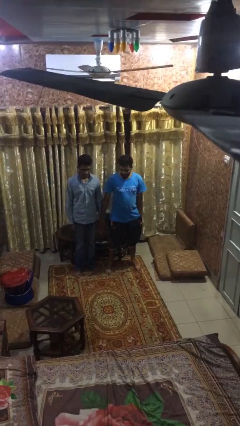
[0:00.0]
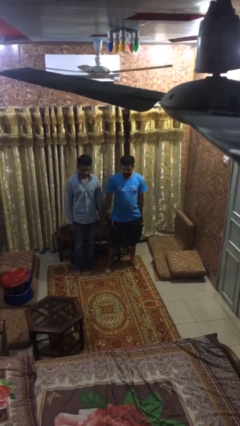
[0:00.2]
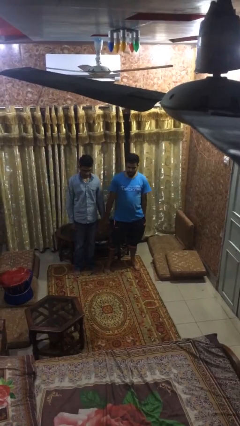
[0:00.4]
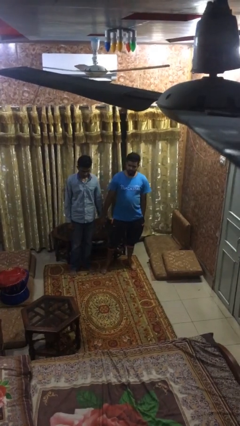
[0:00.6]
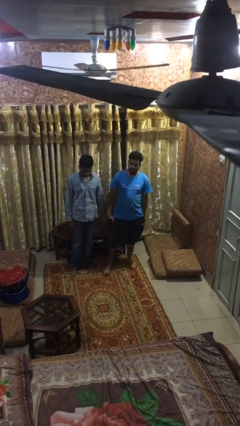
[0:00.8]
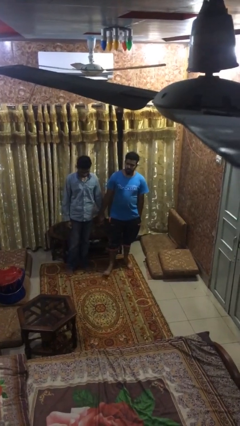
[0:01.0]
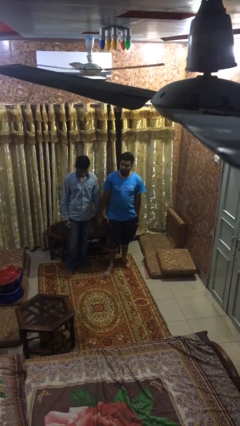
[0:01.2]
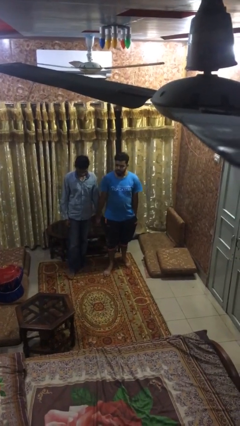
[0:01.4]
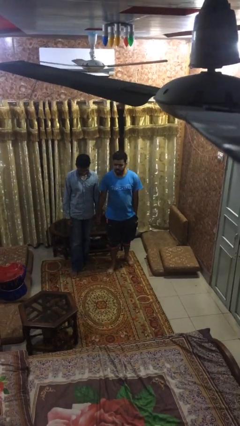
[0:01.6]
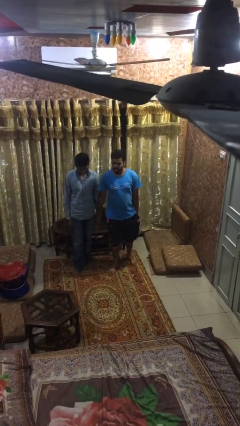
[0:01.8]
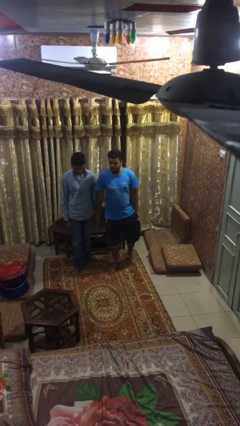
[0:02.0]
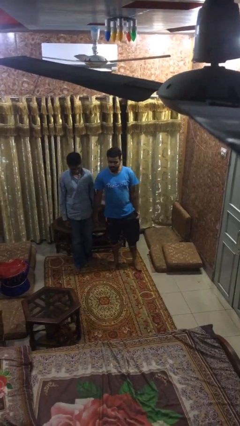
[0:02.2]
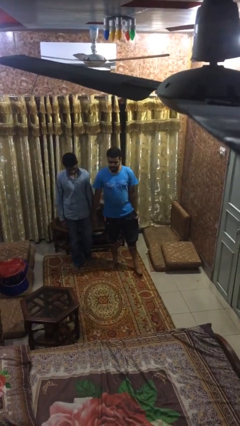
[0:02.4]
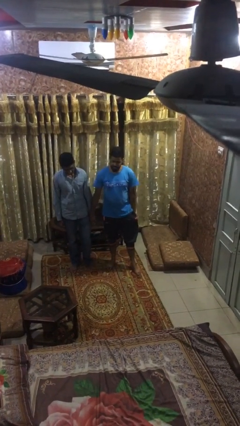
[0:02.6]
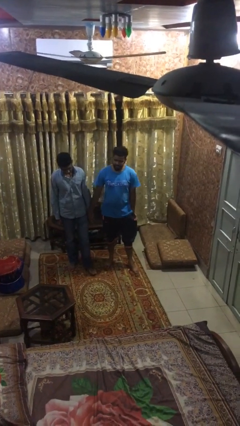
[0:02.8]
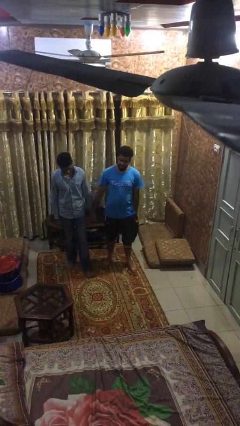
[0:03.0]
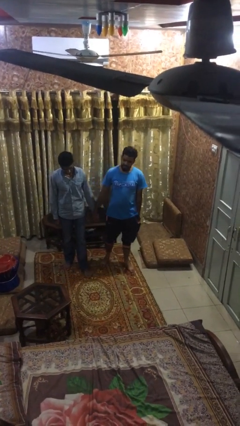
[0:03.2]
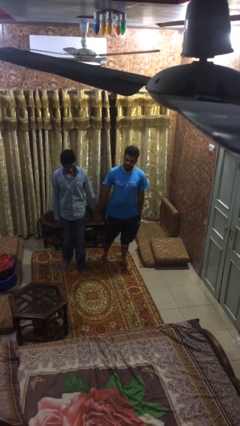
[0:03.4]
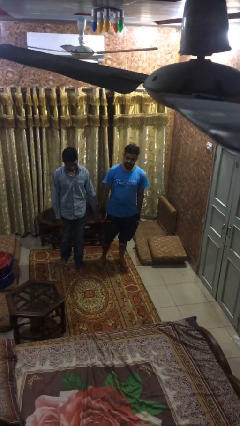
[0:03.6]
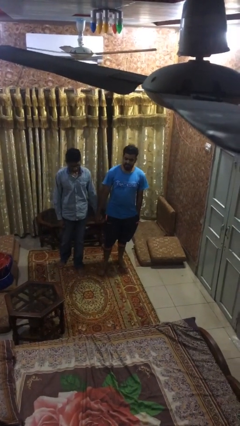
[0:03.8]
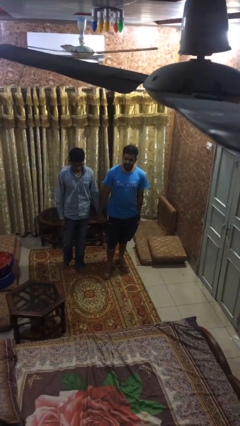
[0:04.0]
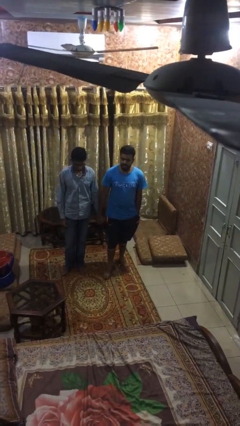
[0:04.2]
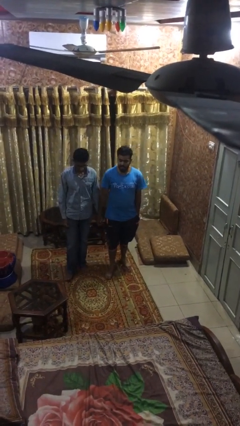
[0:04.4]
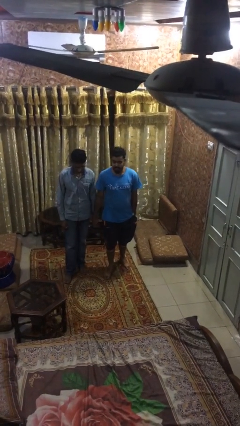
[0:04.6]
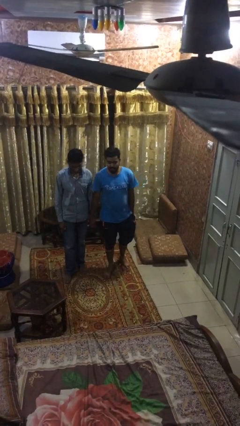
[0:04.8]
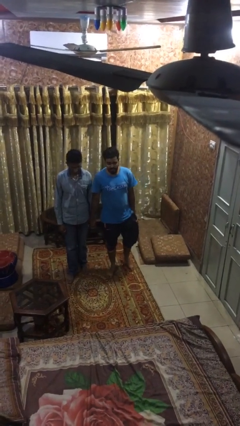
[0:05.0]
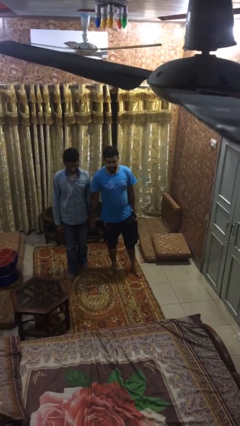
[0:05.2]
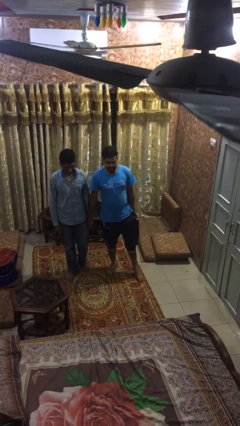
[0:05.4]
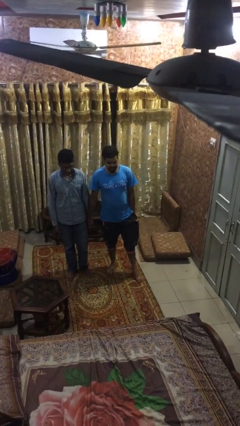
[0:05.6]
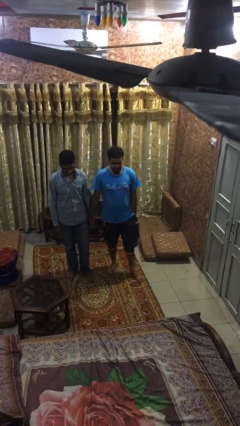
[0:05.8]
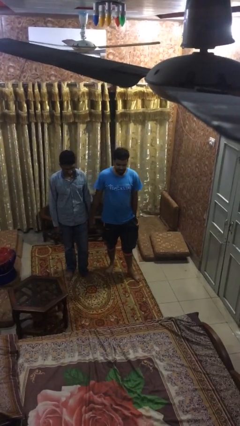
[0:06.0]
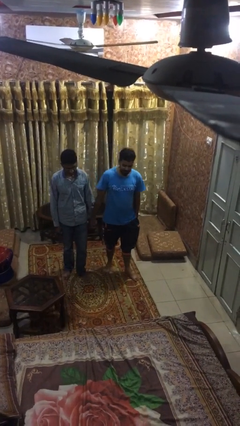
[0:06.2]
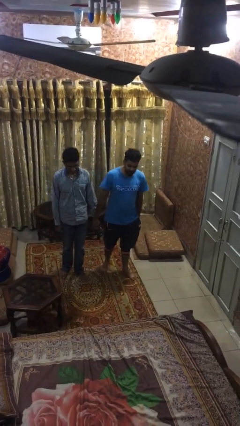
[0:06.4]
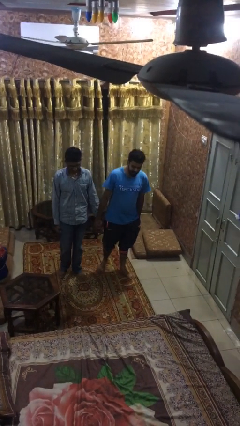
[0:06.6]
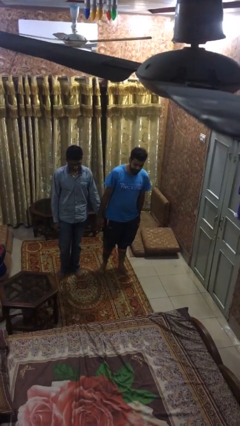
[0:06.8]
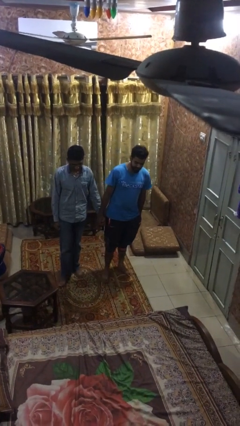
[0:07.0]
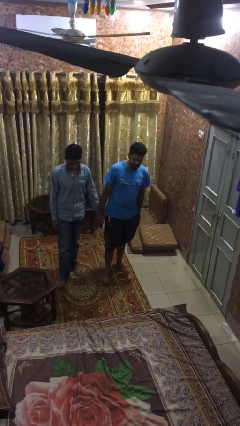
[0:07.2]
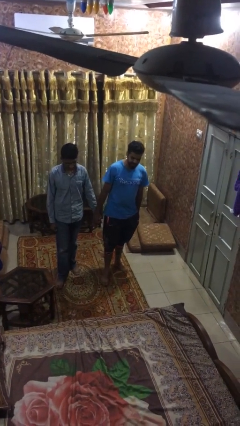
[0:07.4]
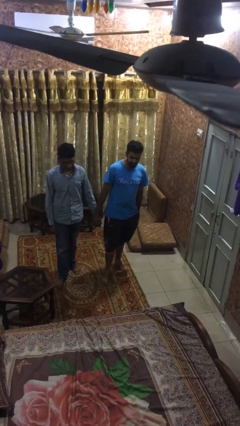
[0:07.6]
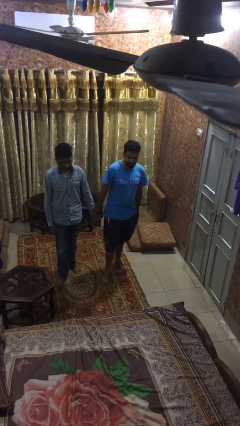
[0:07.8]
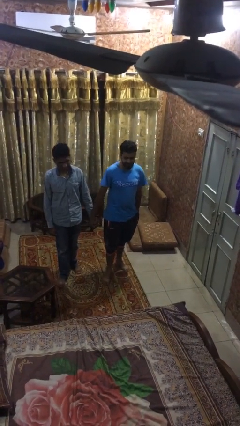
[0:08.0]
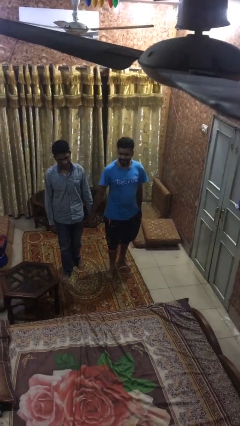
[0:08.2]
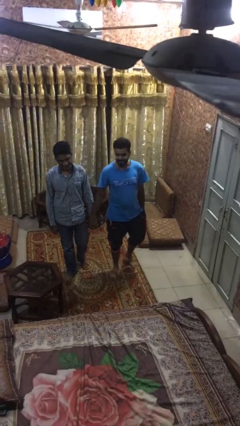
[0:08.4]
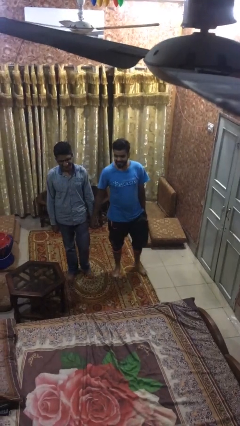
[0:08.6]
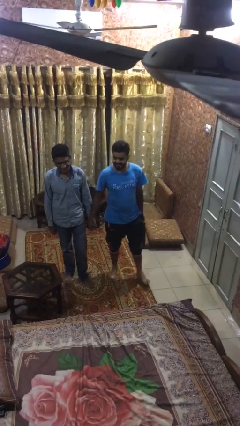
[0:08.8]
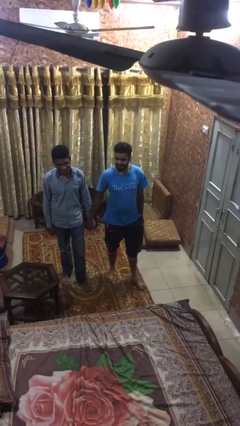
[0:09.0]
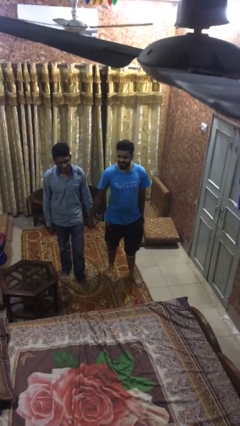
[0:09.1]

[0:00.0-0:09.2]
person holds hand

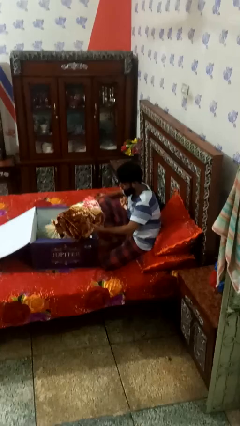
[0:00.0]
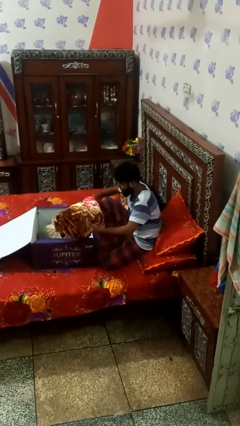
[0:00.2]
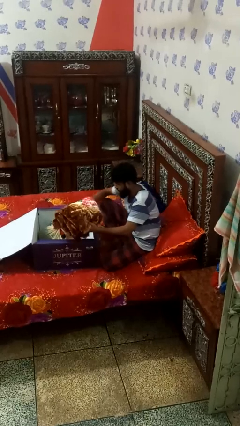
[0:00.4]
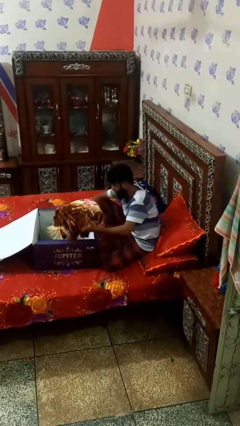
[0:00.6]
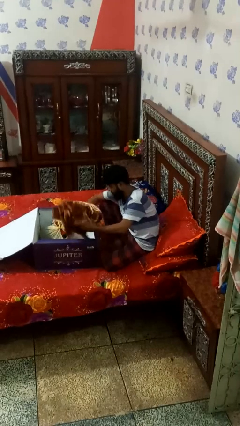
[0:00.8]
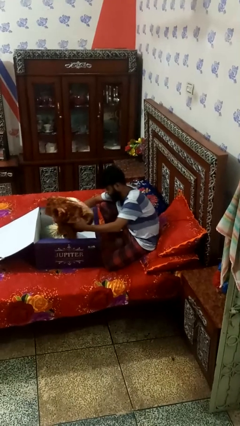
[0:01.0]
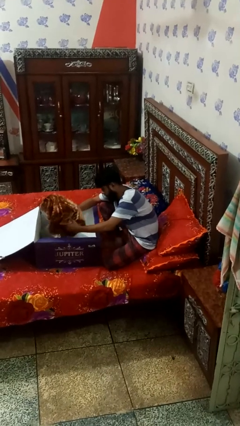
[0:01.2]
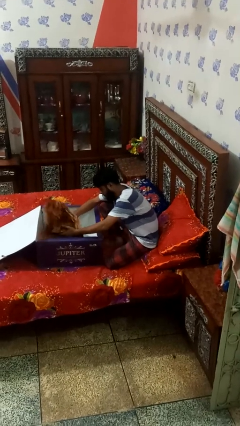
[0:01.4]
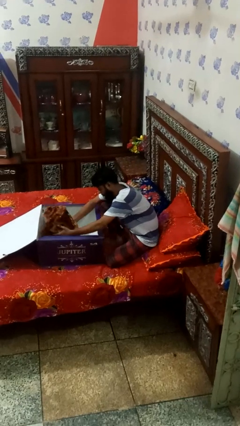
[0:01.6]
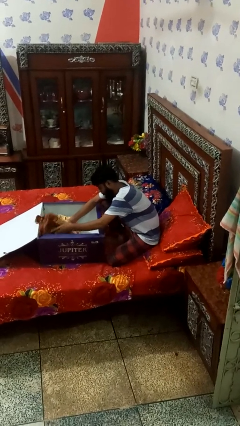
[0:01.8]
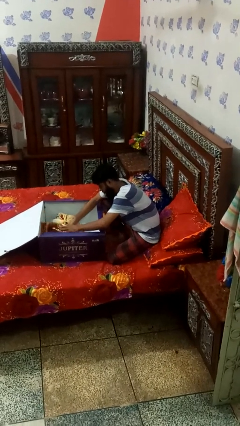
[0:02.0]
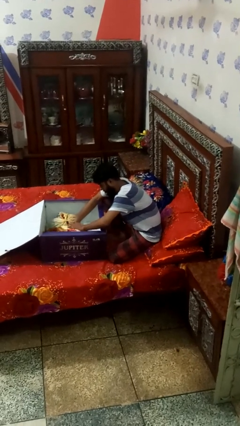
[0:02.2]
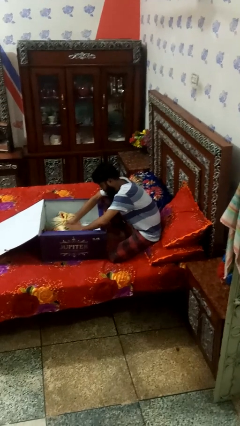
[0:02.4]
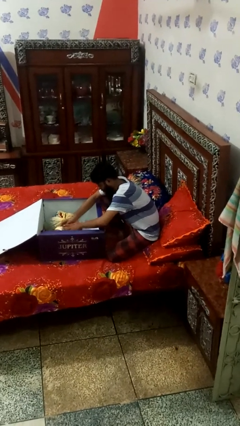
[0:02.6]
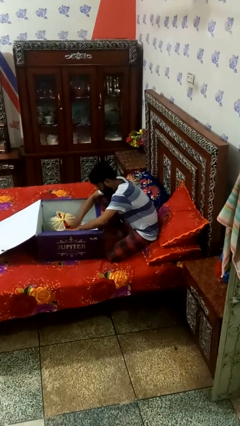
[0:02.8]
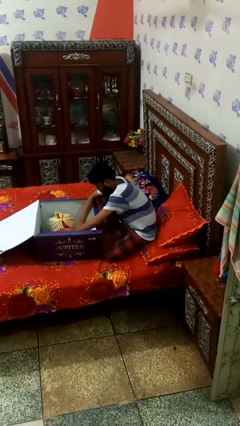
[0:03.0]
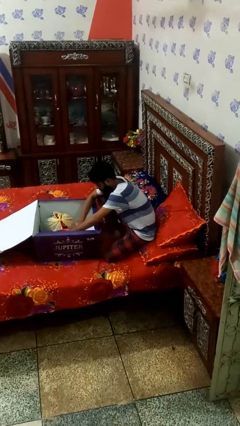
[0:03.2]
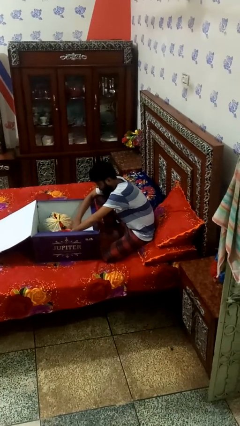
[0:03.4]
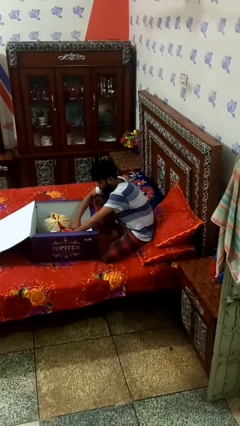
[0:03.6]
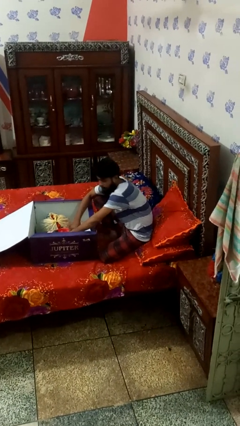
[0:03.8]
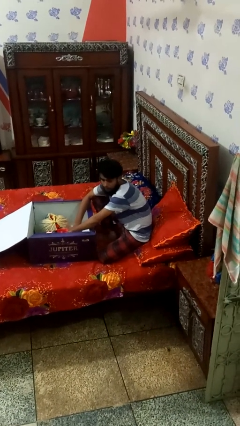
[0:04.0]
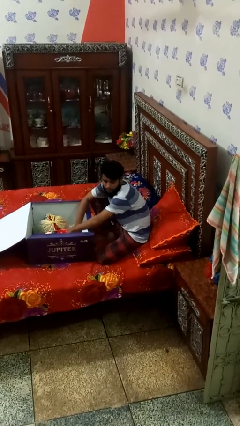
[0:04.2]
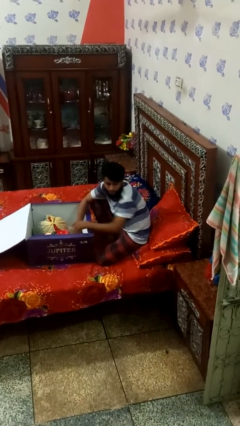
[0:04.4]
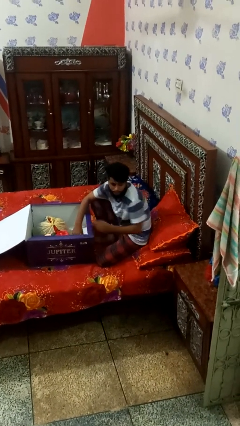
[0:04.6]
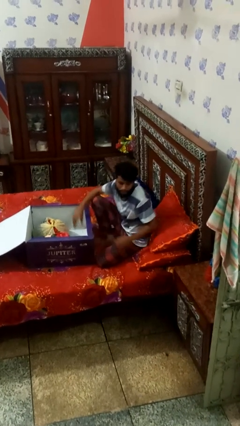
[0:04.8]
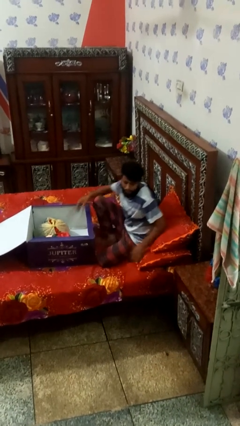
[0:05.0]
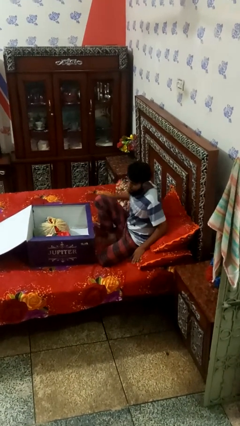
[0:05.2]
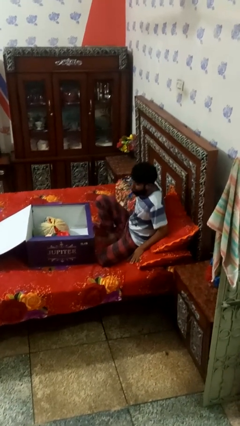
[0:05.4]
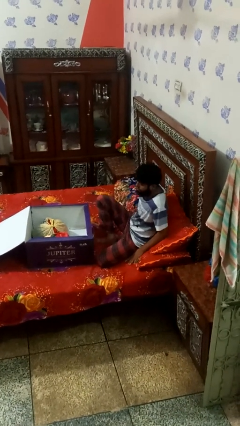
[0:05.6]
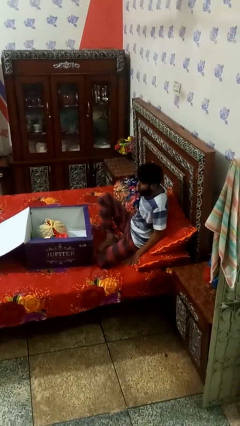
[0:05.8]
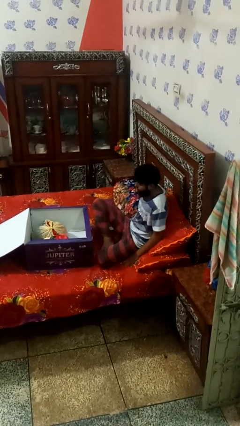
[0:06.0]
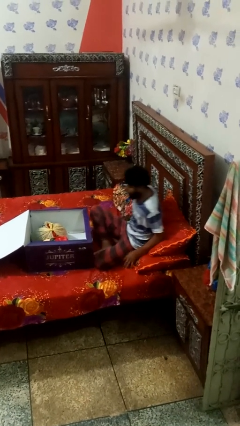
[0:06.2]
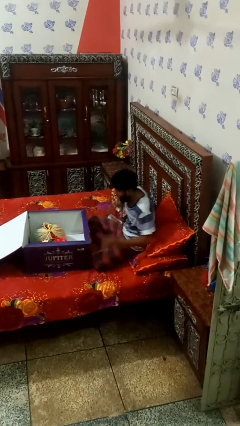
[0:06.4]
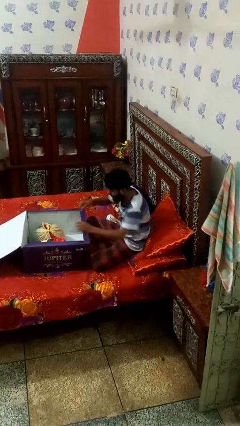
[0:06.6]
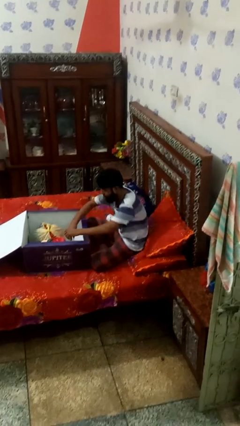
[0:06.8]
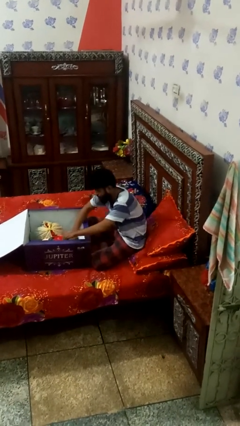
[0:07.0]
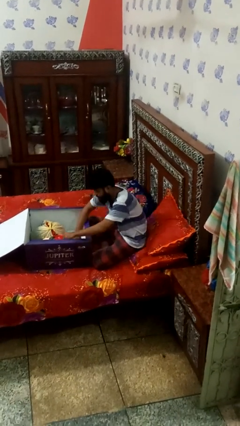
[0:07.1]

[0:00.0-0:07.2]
person puts object into box

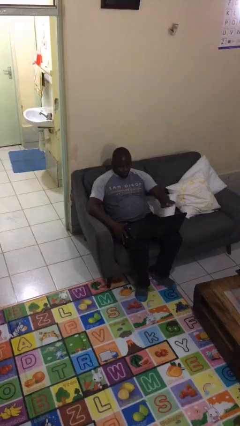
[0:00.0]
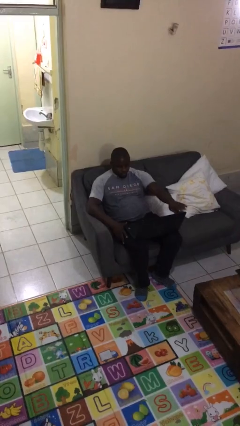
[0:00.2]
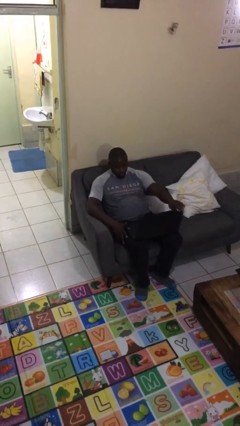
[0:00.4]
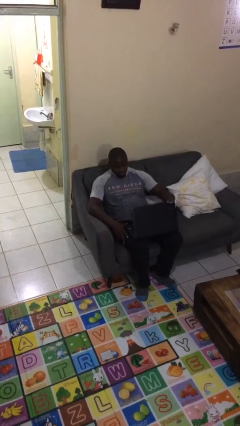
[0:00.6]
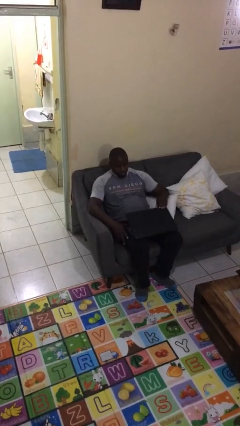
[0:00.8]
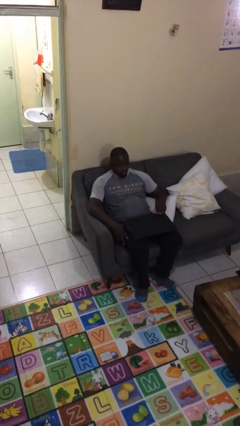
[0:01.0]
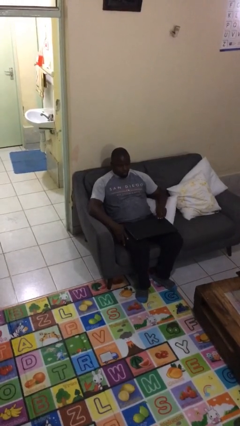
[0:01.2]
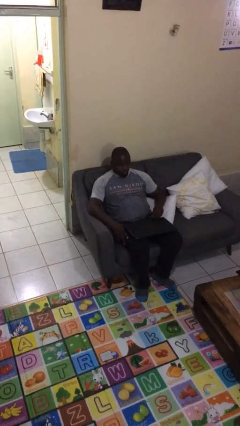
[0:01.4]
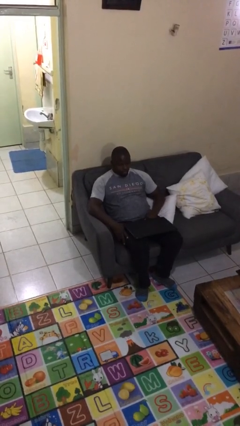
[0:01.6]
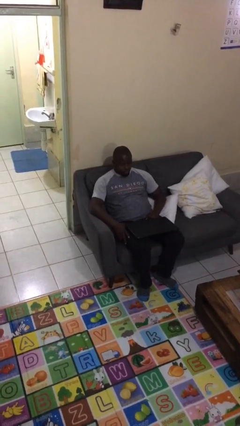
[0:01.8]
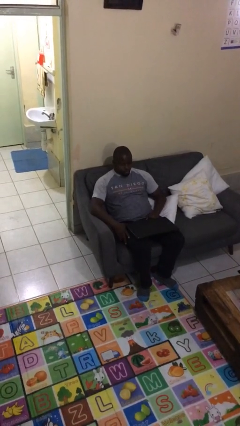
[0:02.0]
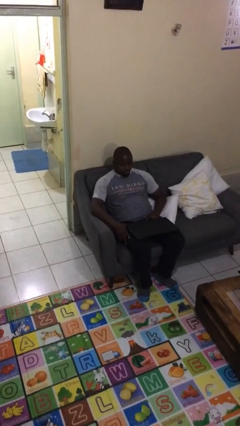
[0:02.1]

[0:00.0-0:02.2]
person closes laptop
